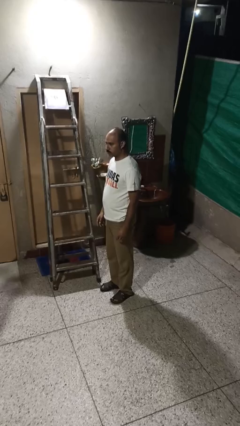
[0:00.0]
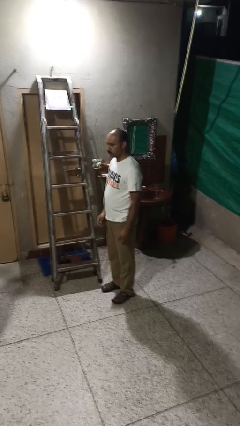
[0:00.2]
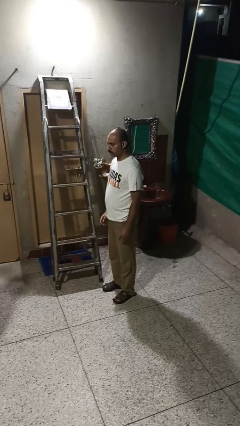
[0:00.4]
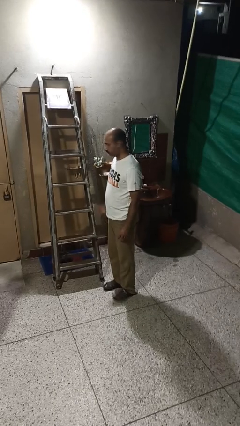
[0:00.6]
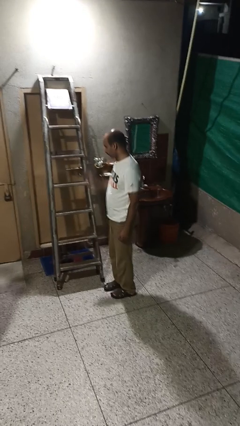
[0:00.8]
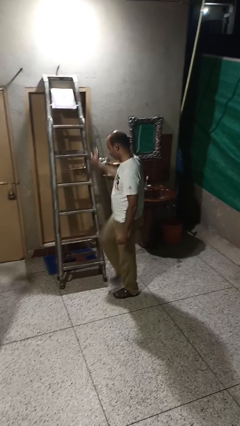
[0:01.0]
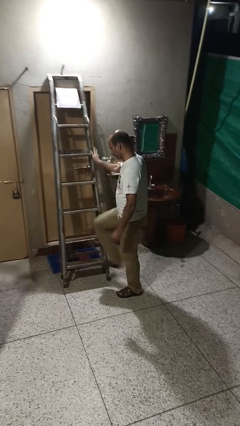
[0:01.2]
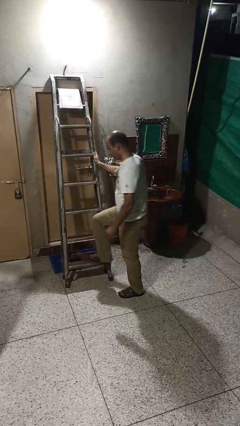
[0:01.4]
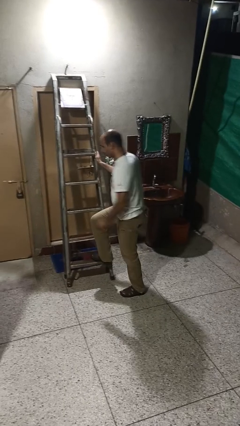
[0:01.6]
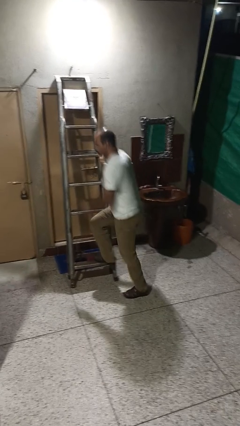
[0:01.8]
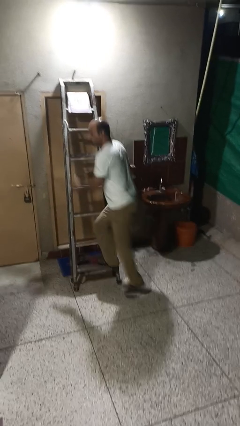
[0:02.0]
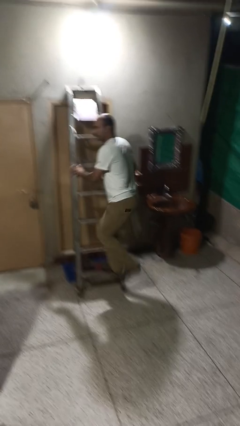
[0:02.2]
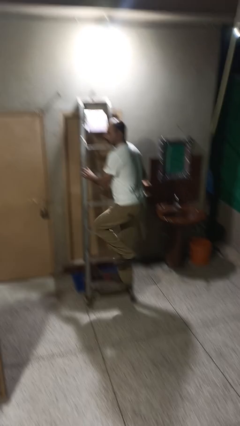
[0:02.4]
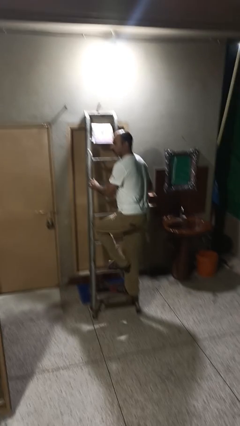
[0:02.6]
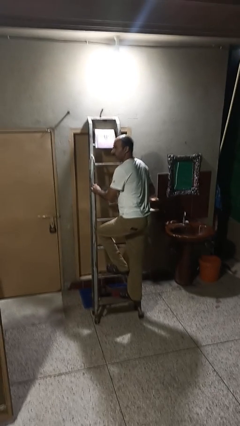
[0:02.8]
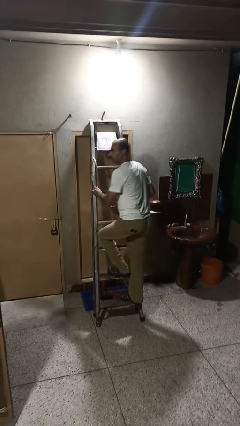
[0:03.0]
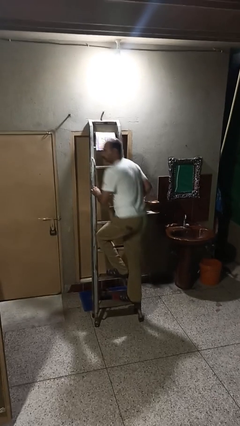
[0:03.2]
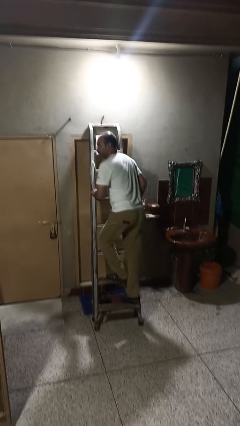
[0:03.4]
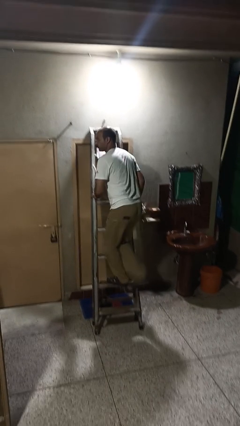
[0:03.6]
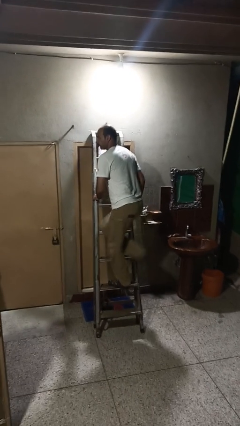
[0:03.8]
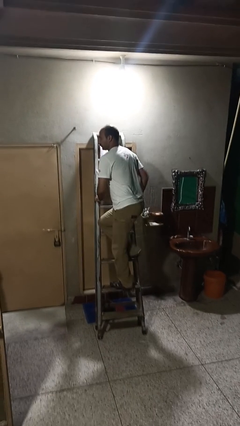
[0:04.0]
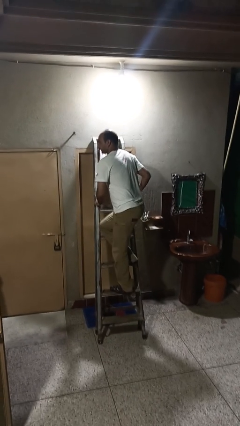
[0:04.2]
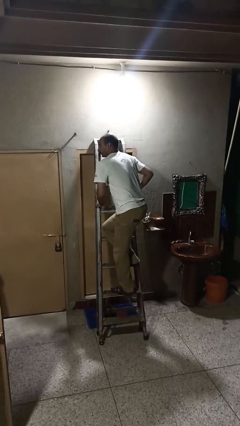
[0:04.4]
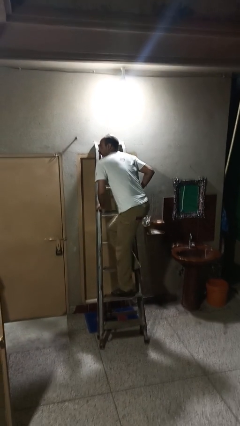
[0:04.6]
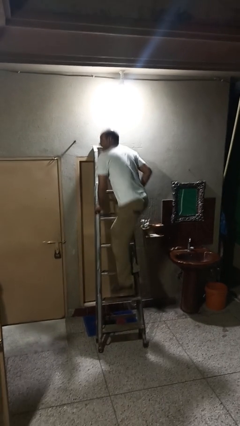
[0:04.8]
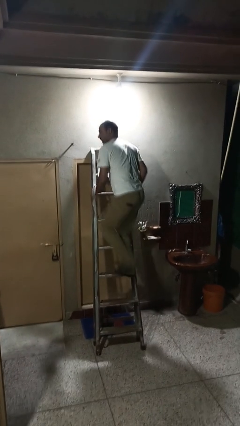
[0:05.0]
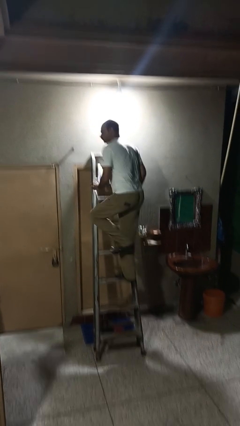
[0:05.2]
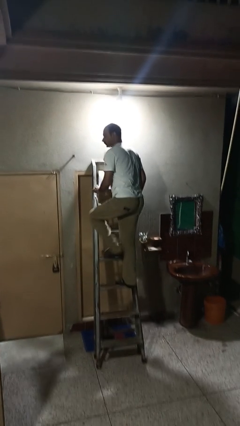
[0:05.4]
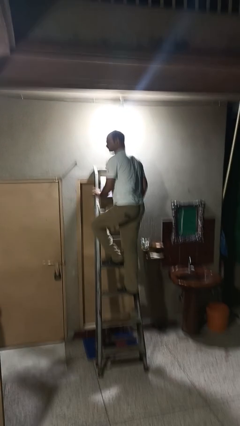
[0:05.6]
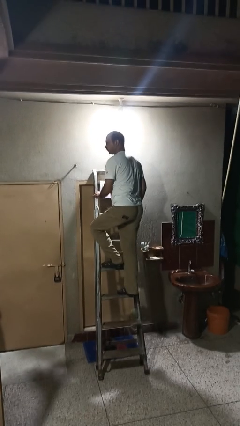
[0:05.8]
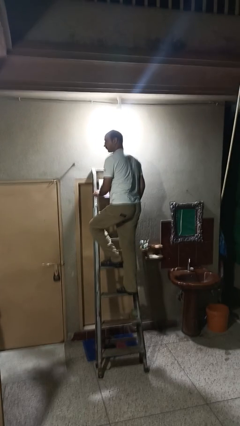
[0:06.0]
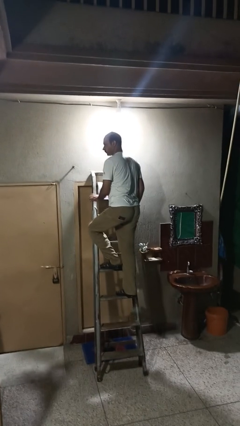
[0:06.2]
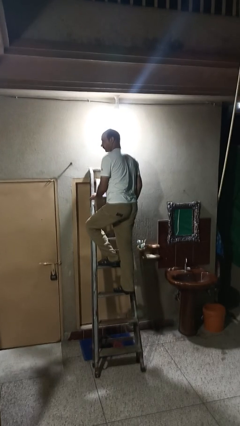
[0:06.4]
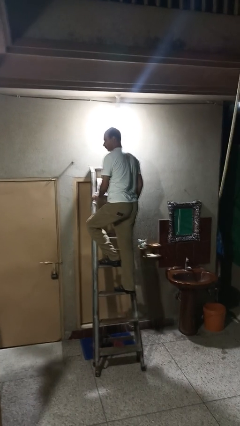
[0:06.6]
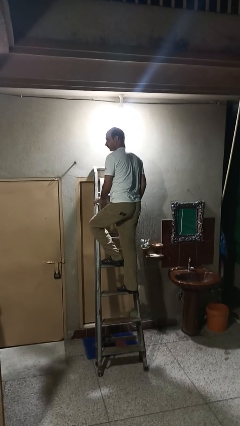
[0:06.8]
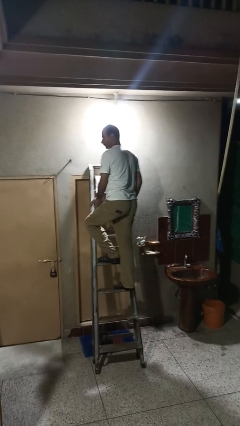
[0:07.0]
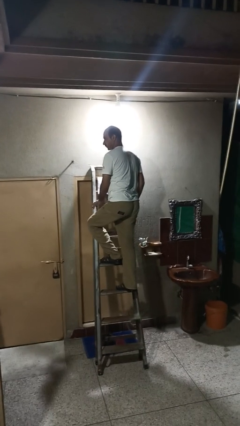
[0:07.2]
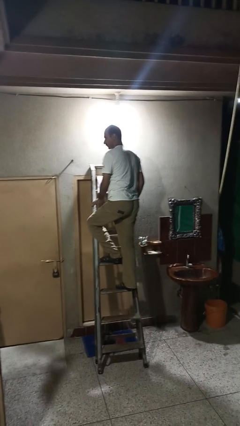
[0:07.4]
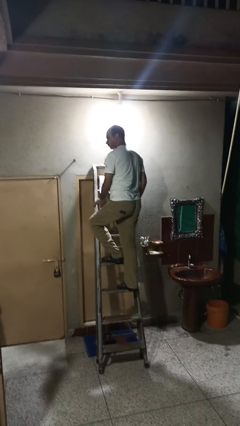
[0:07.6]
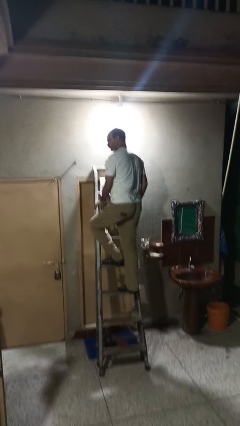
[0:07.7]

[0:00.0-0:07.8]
person climbs up ladder

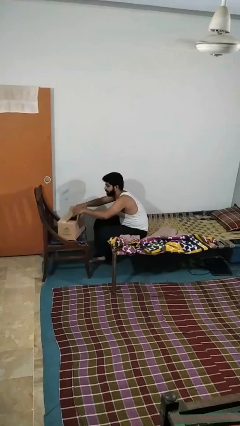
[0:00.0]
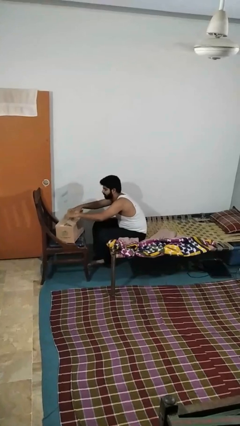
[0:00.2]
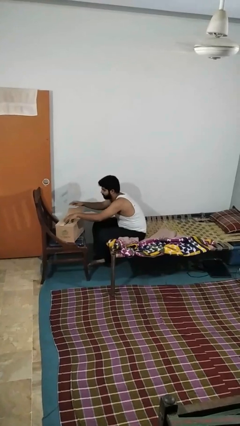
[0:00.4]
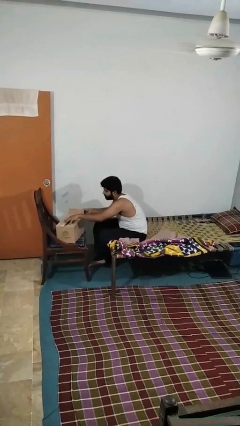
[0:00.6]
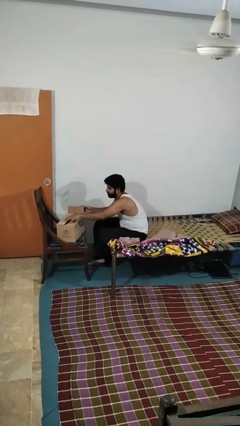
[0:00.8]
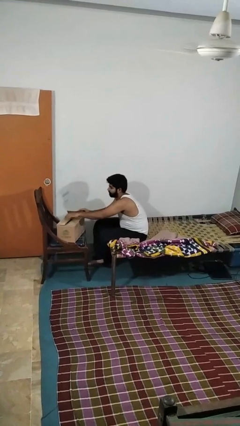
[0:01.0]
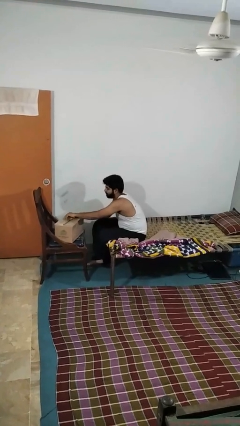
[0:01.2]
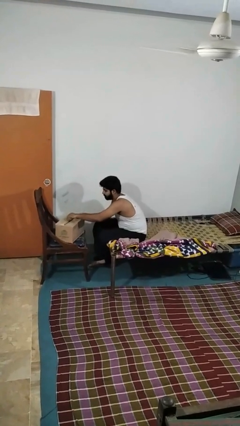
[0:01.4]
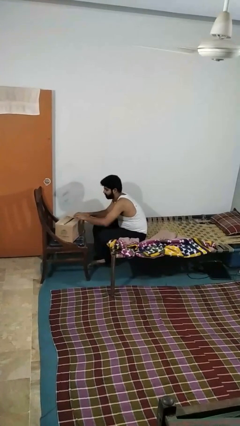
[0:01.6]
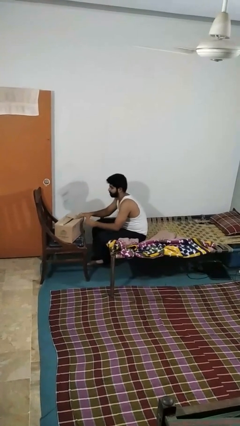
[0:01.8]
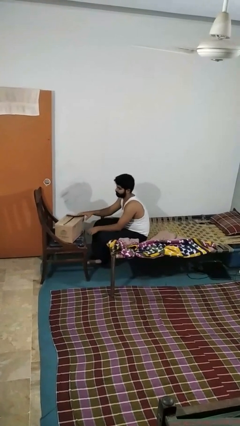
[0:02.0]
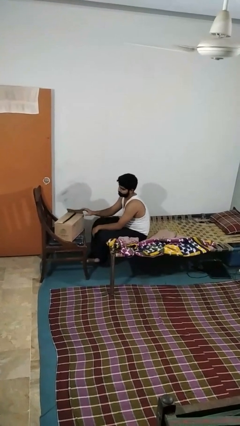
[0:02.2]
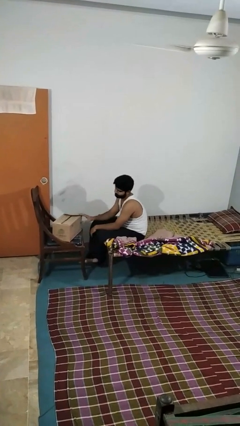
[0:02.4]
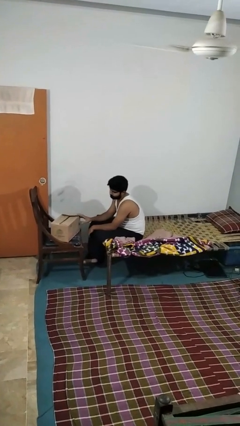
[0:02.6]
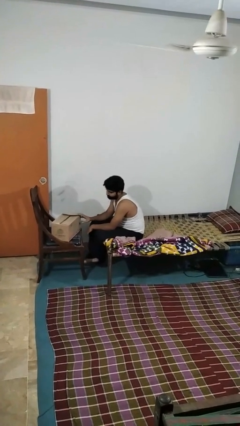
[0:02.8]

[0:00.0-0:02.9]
person closes box

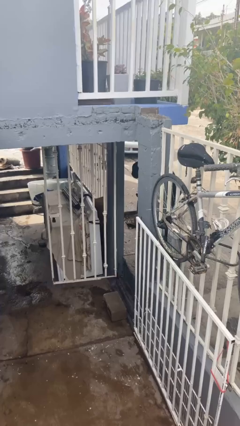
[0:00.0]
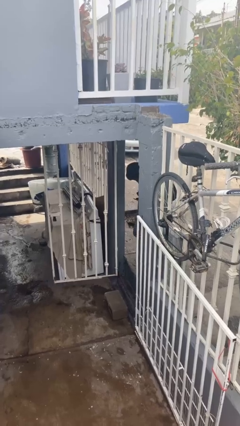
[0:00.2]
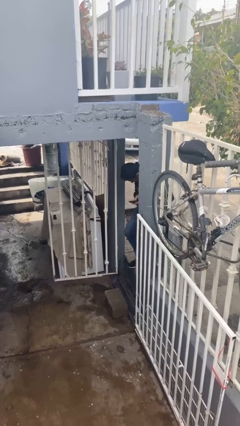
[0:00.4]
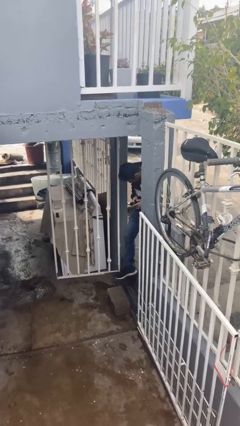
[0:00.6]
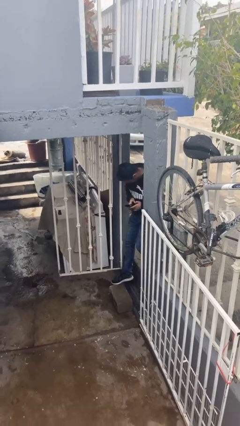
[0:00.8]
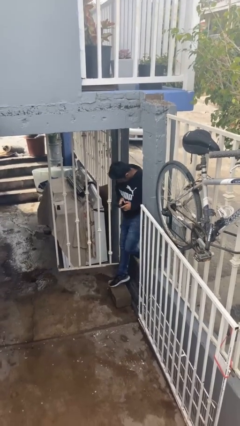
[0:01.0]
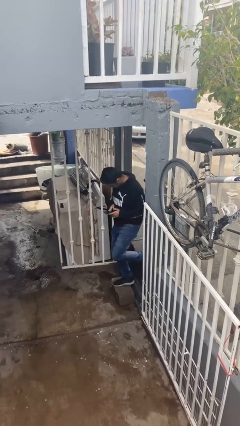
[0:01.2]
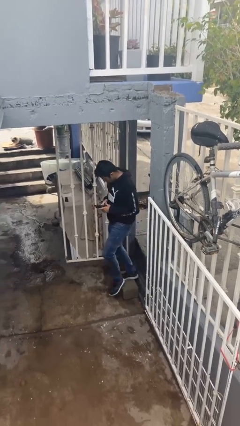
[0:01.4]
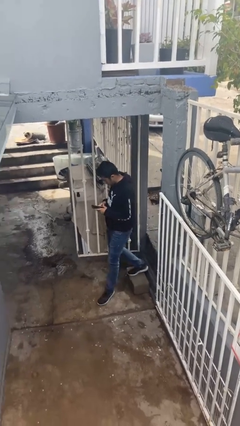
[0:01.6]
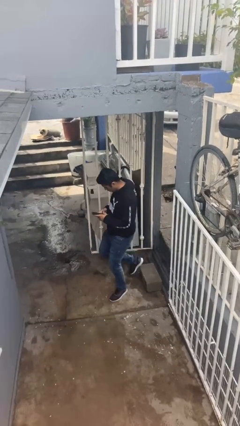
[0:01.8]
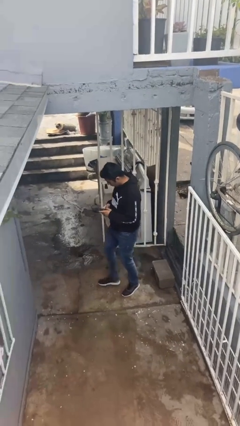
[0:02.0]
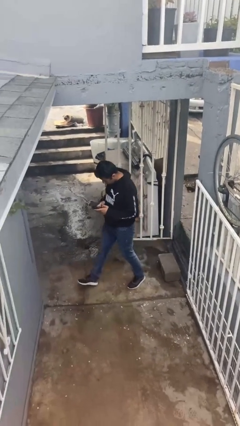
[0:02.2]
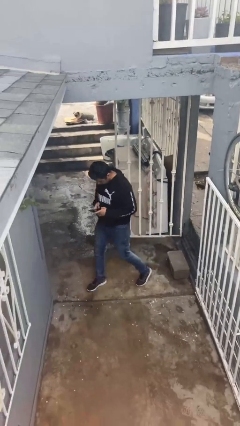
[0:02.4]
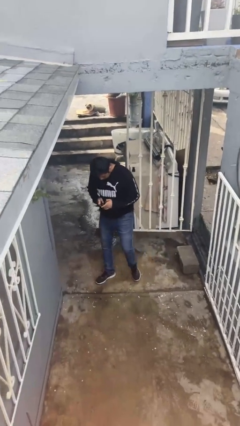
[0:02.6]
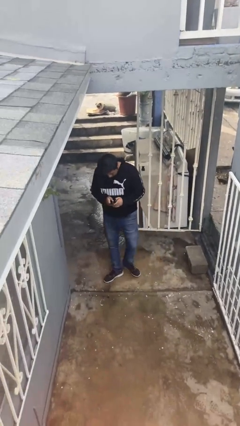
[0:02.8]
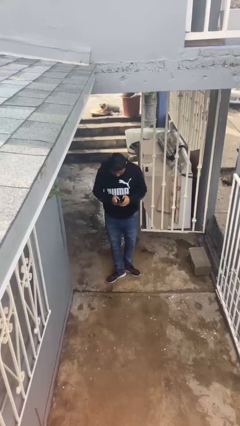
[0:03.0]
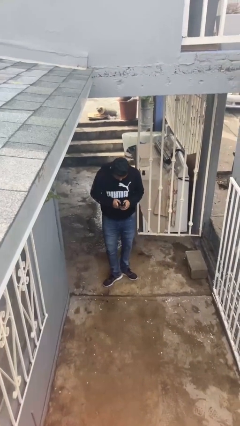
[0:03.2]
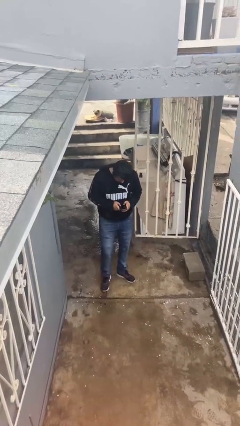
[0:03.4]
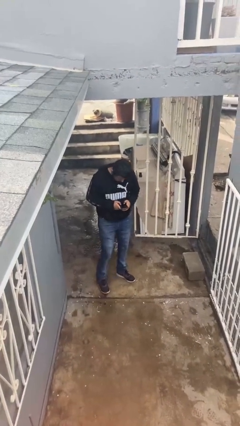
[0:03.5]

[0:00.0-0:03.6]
person enters scene through structure

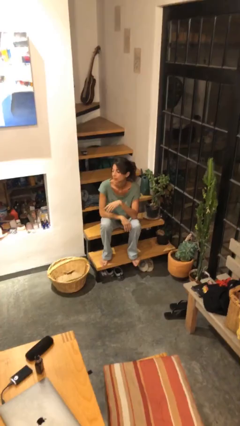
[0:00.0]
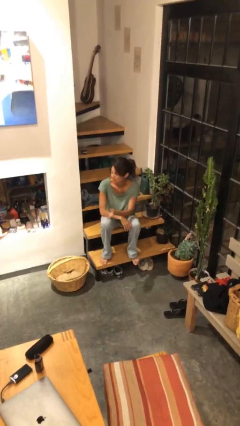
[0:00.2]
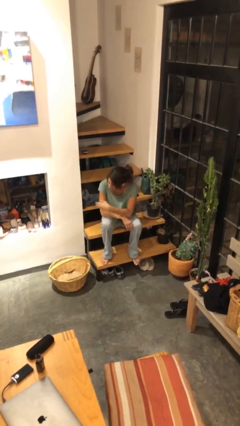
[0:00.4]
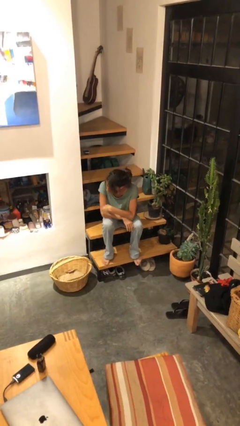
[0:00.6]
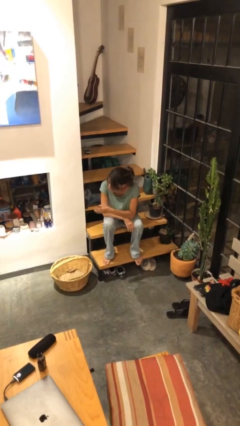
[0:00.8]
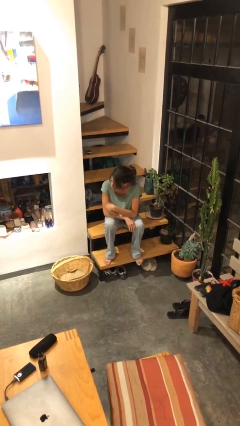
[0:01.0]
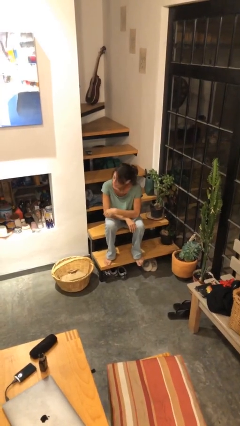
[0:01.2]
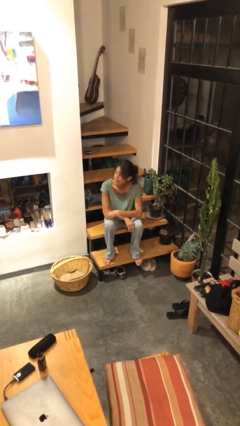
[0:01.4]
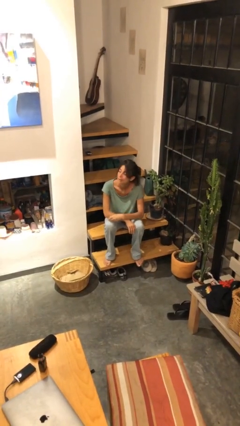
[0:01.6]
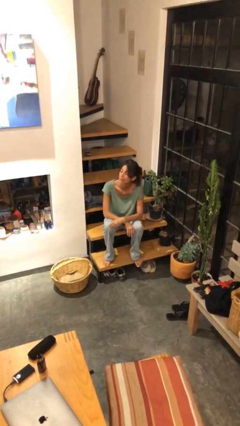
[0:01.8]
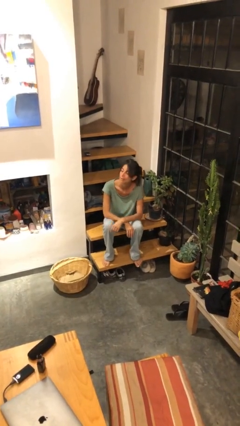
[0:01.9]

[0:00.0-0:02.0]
person gestures come here

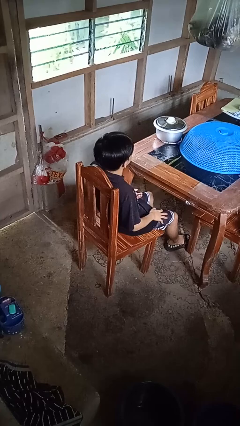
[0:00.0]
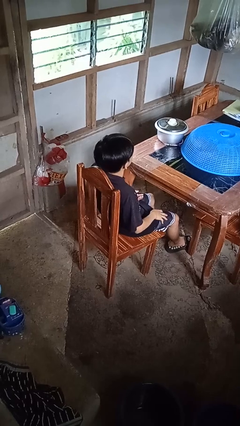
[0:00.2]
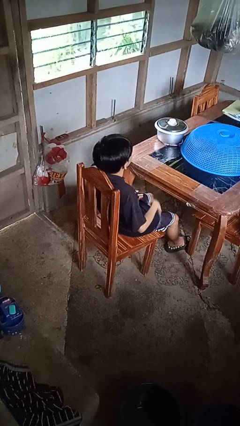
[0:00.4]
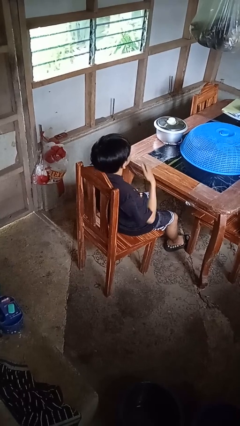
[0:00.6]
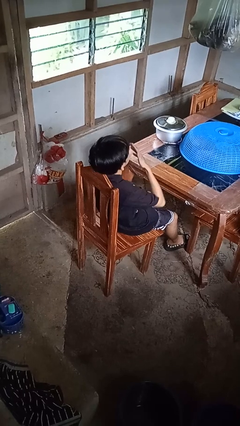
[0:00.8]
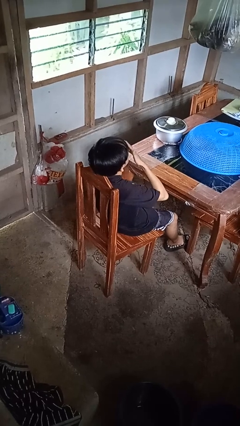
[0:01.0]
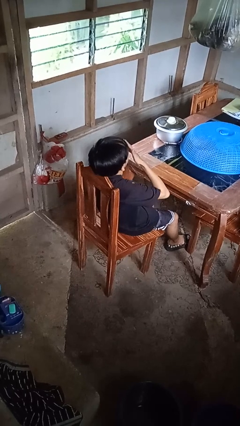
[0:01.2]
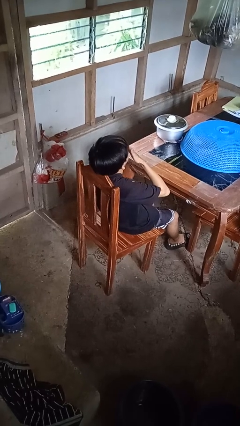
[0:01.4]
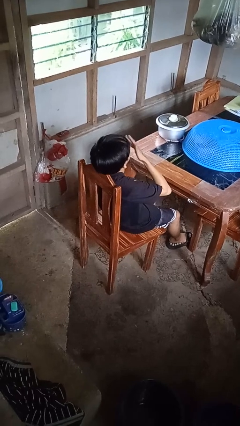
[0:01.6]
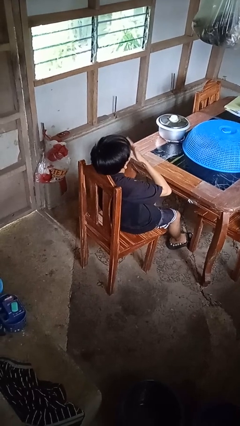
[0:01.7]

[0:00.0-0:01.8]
person yawns
